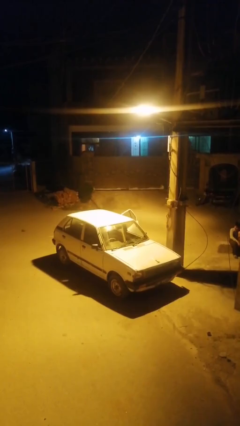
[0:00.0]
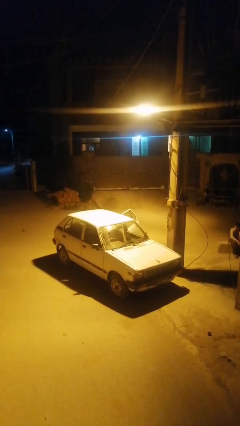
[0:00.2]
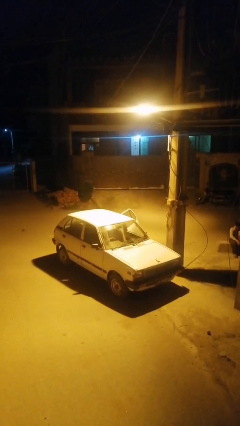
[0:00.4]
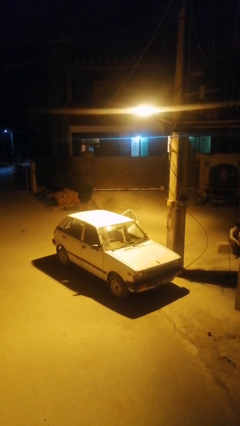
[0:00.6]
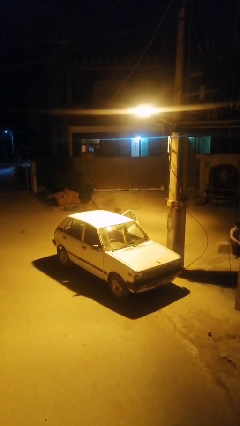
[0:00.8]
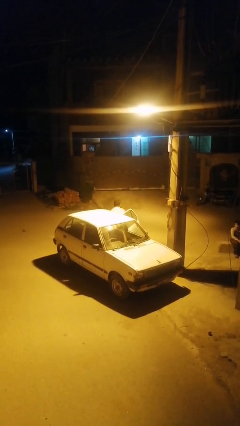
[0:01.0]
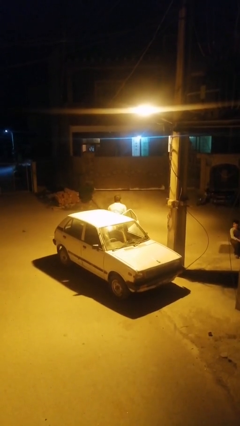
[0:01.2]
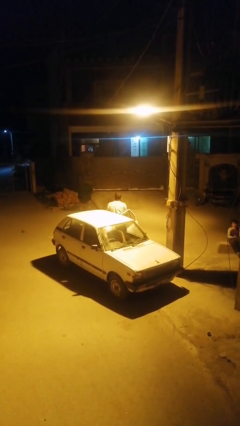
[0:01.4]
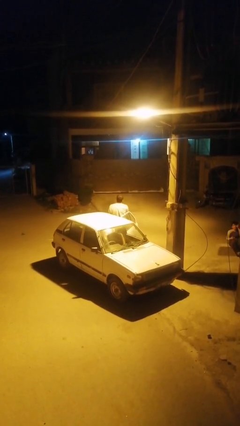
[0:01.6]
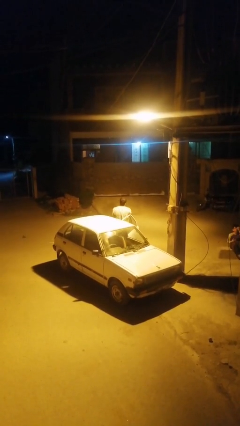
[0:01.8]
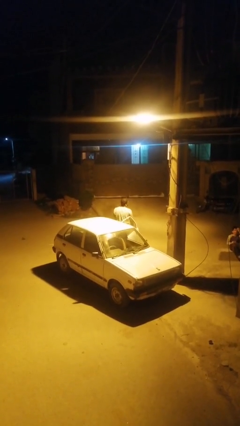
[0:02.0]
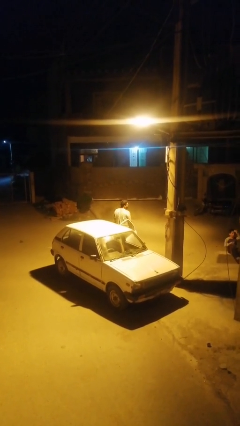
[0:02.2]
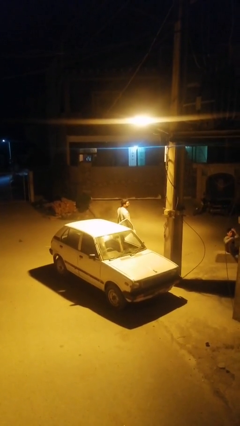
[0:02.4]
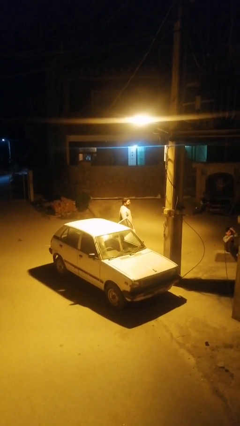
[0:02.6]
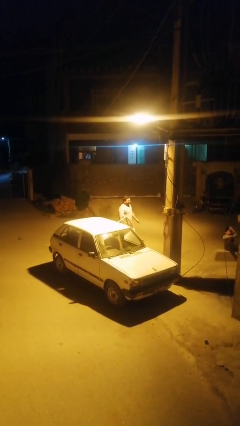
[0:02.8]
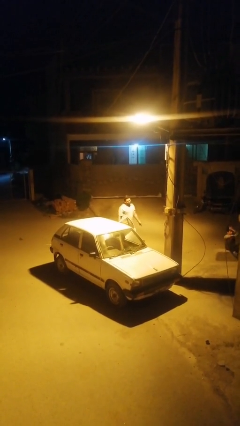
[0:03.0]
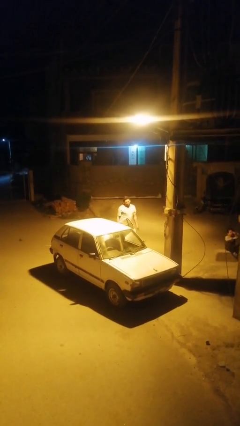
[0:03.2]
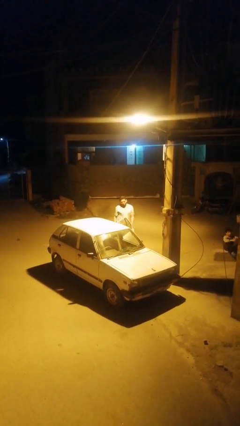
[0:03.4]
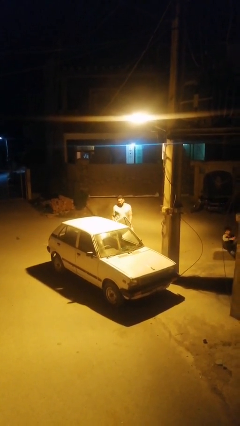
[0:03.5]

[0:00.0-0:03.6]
person exits car

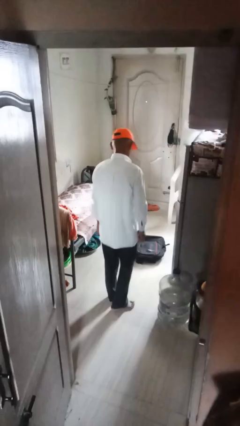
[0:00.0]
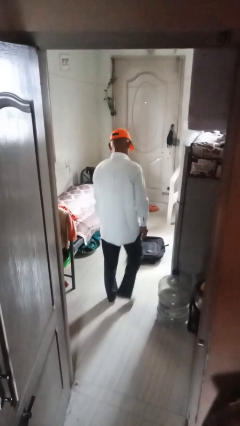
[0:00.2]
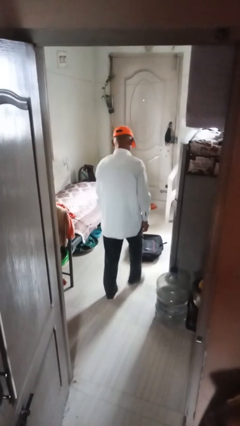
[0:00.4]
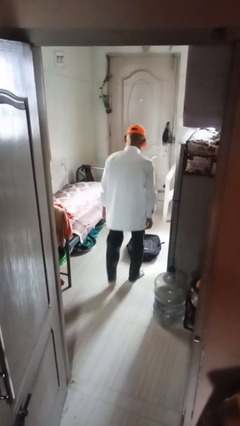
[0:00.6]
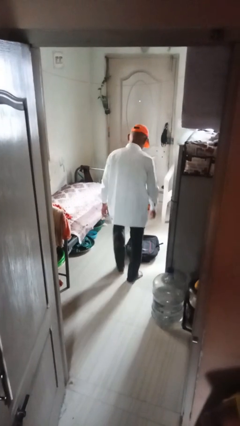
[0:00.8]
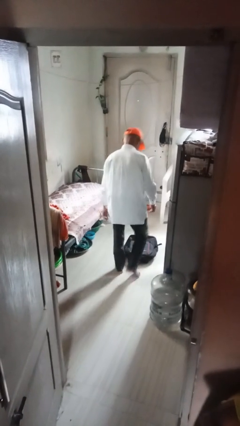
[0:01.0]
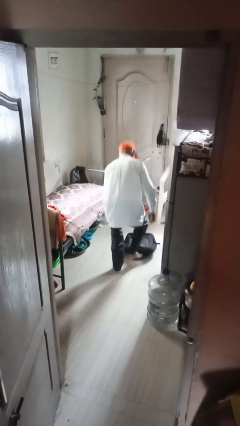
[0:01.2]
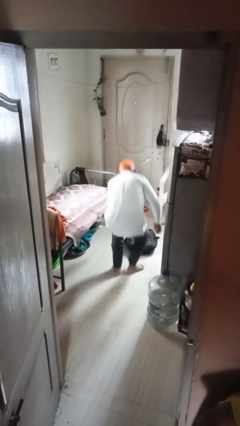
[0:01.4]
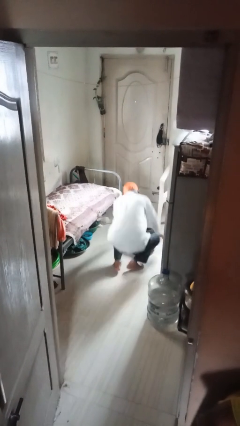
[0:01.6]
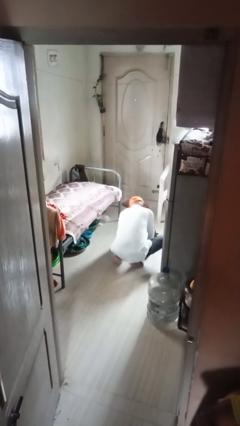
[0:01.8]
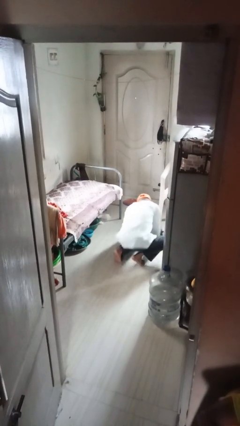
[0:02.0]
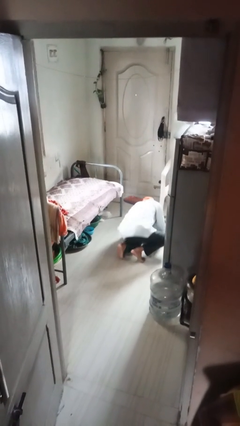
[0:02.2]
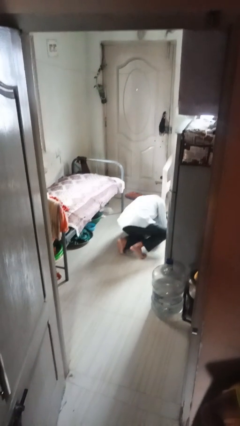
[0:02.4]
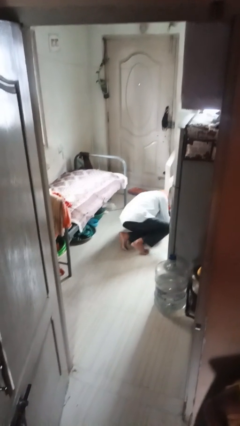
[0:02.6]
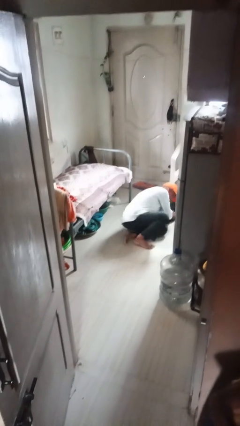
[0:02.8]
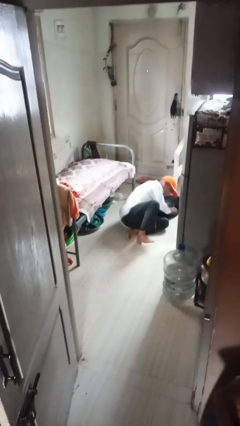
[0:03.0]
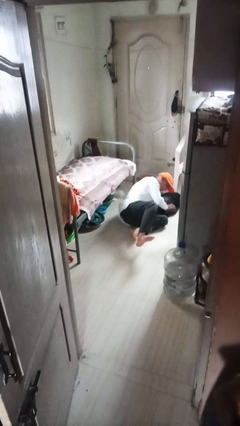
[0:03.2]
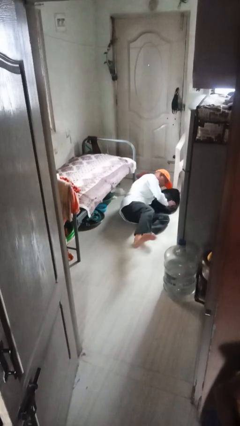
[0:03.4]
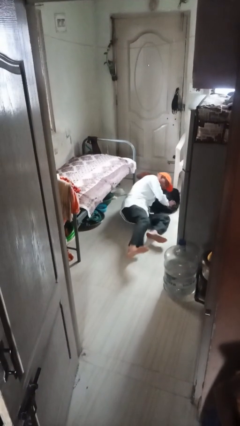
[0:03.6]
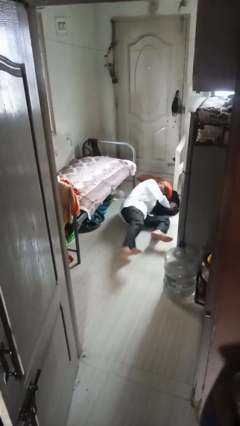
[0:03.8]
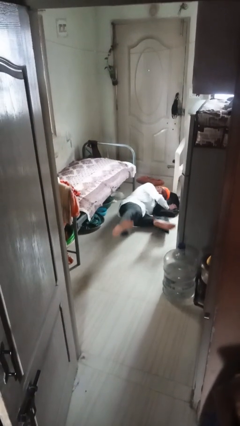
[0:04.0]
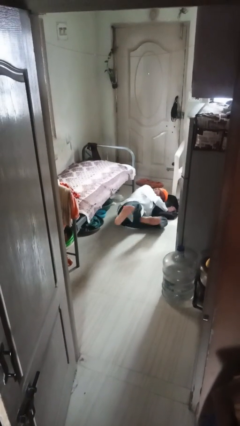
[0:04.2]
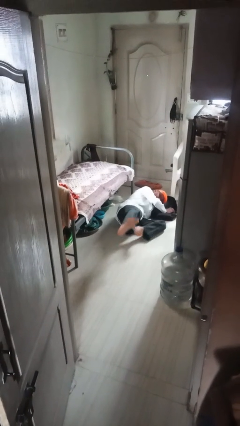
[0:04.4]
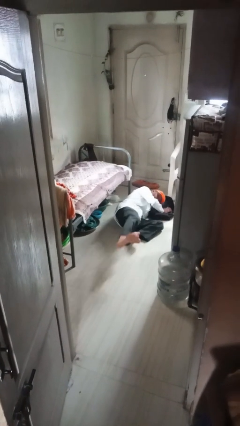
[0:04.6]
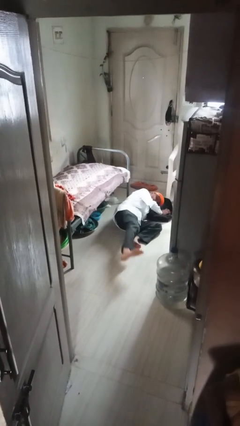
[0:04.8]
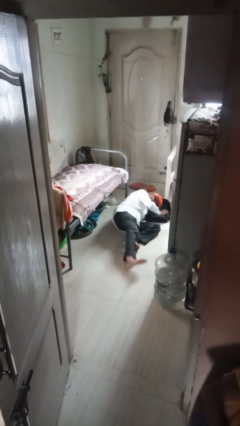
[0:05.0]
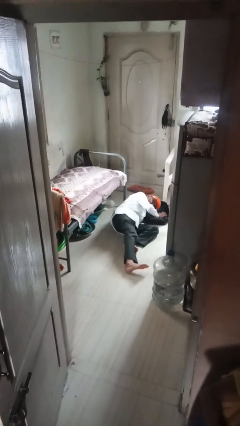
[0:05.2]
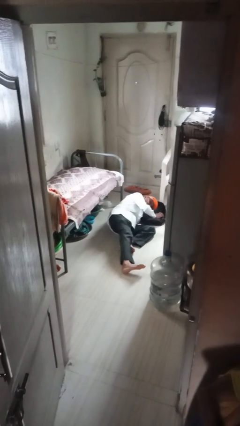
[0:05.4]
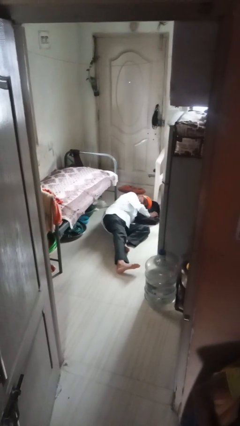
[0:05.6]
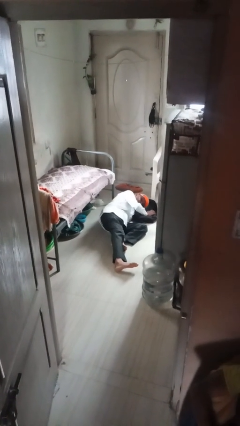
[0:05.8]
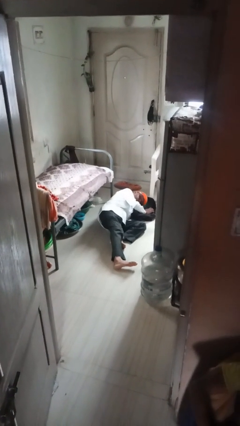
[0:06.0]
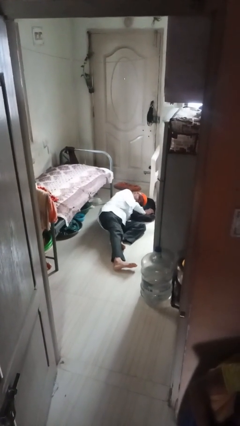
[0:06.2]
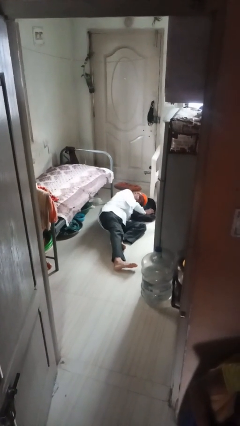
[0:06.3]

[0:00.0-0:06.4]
person trips on object on floor

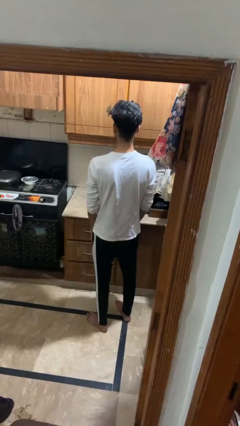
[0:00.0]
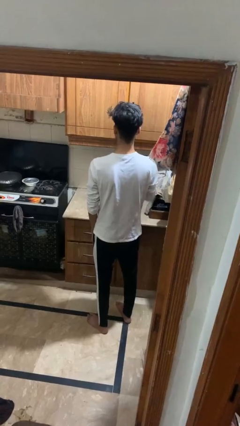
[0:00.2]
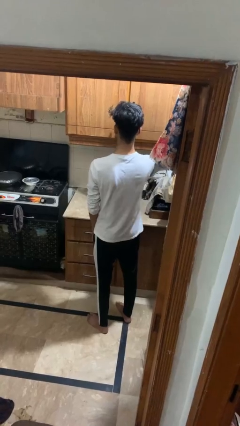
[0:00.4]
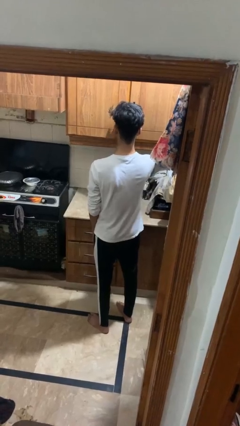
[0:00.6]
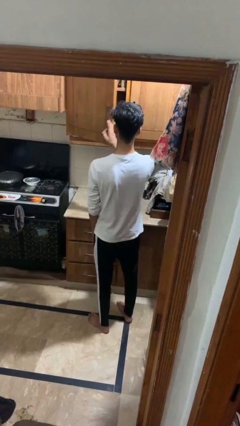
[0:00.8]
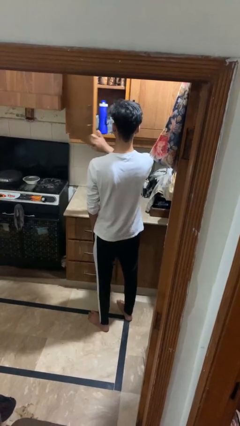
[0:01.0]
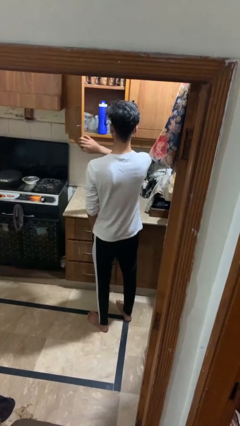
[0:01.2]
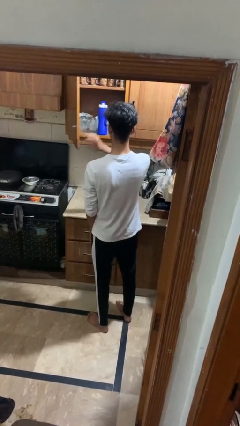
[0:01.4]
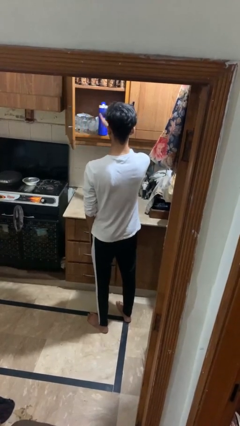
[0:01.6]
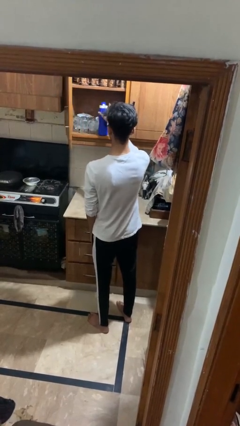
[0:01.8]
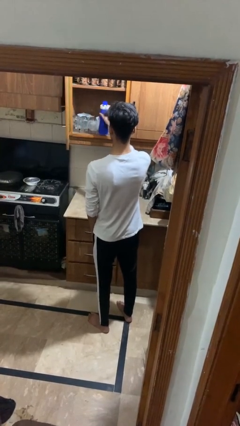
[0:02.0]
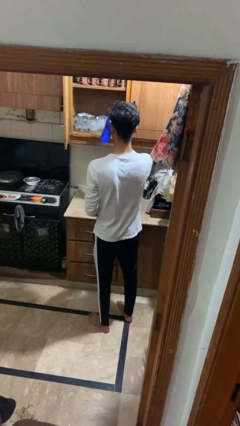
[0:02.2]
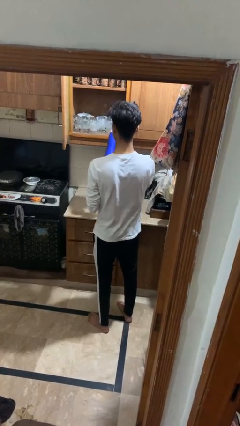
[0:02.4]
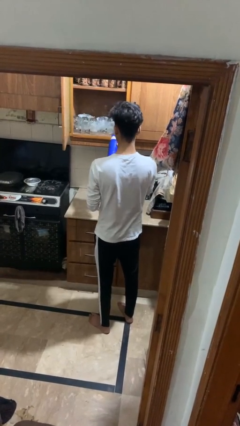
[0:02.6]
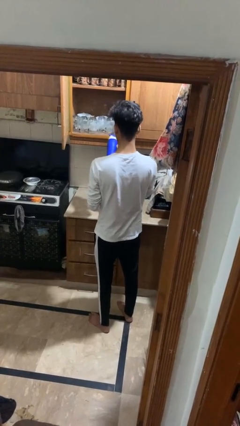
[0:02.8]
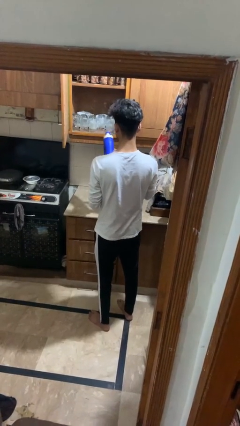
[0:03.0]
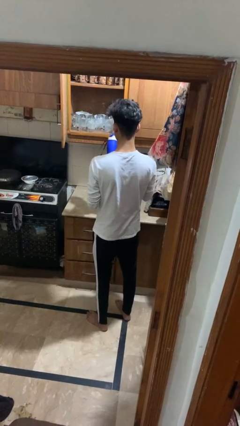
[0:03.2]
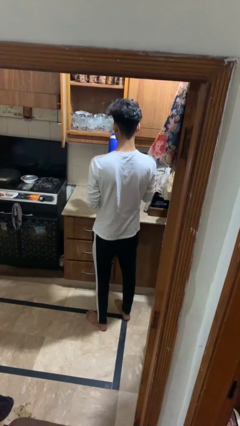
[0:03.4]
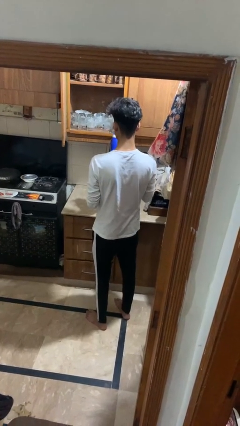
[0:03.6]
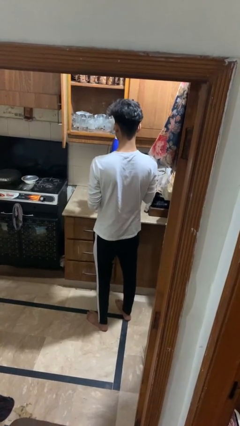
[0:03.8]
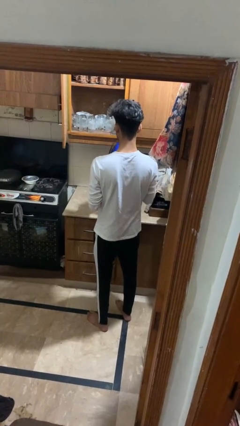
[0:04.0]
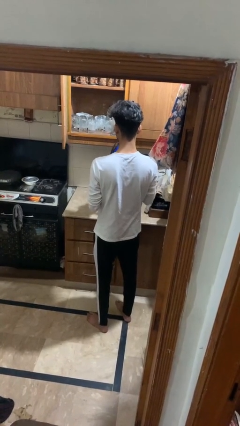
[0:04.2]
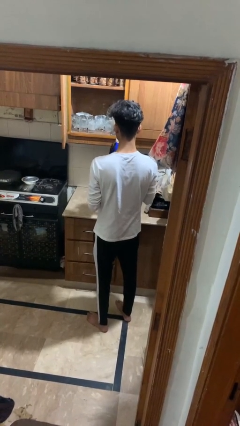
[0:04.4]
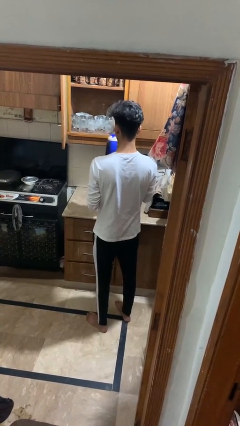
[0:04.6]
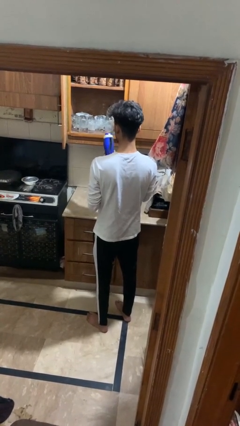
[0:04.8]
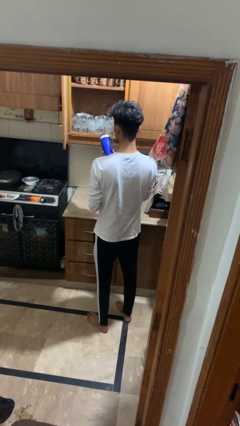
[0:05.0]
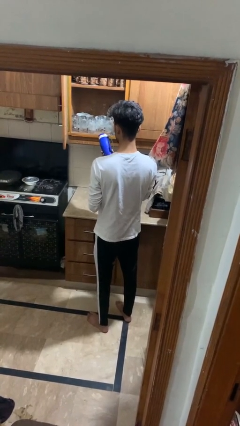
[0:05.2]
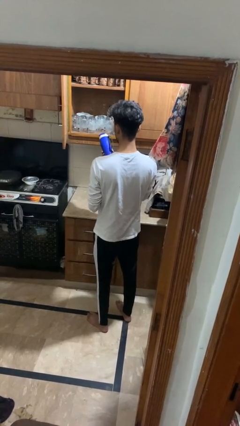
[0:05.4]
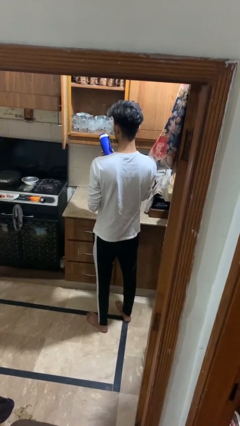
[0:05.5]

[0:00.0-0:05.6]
person puts object in cabinet

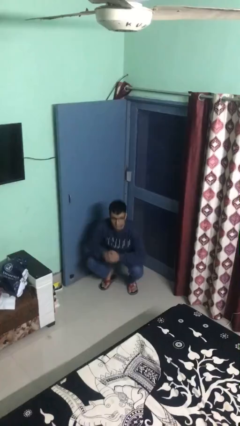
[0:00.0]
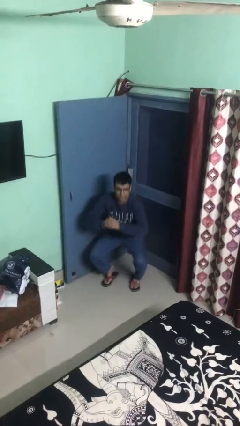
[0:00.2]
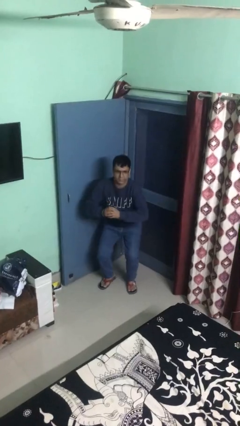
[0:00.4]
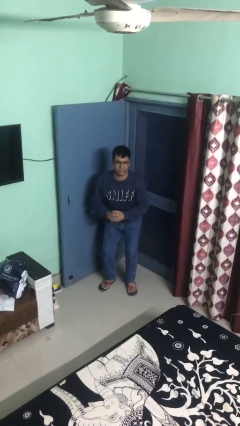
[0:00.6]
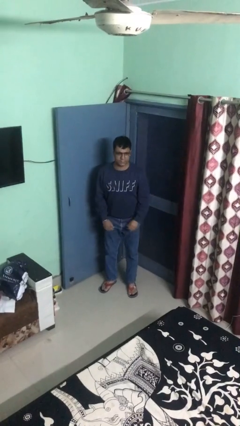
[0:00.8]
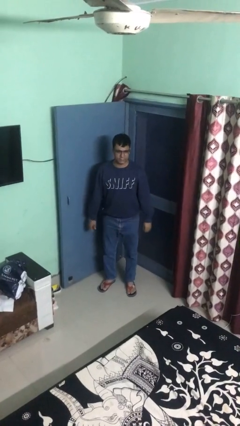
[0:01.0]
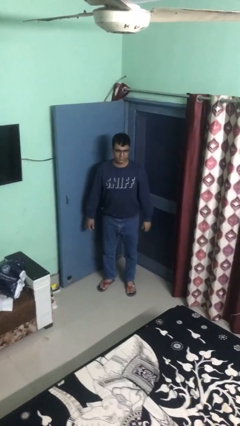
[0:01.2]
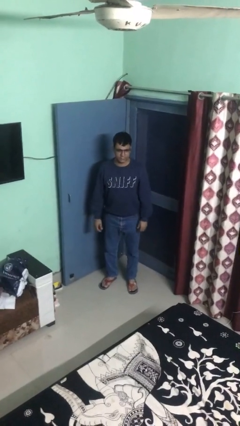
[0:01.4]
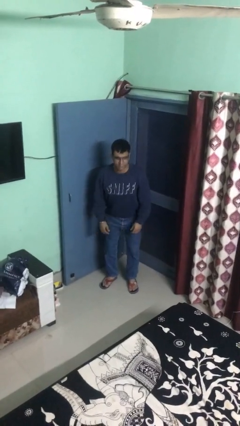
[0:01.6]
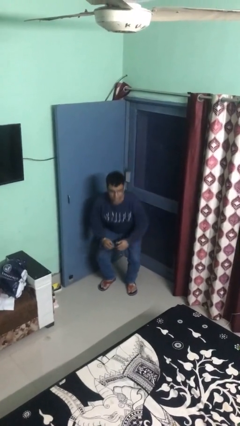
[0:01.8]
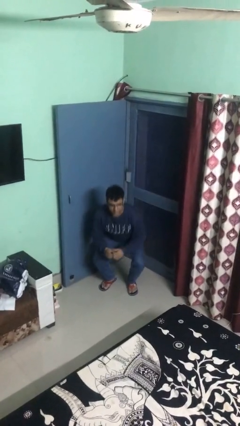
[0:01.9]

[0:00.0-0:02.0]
person stands up
